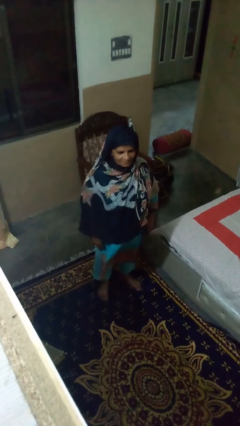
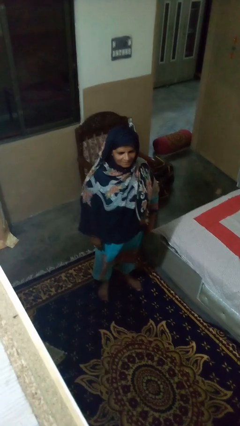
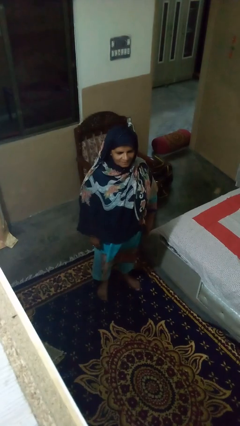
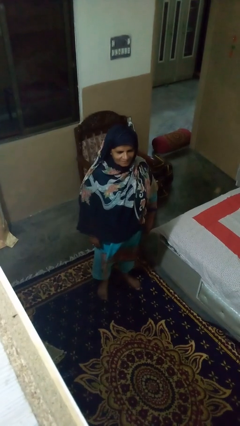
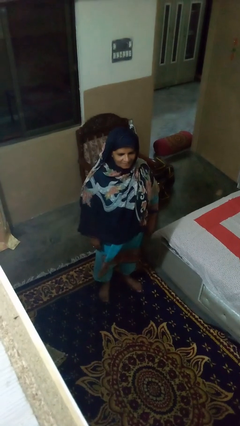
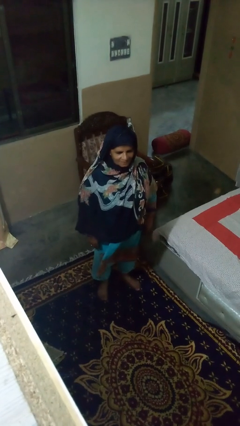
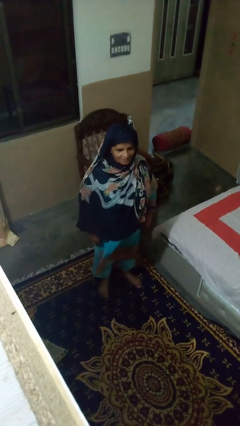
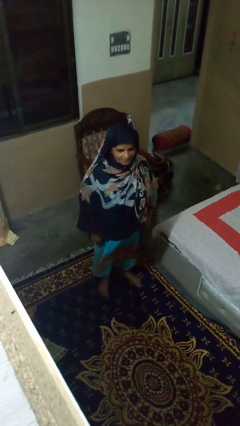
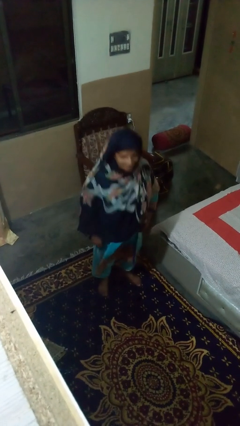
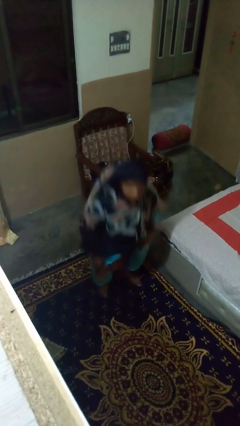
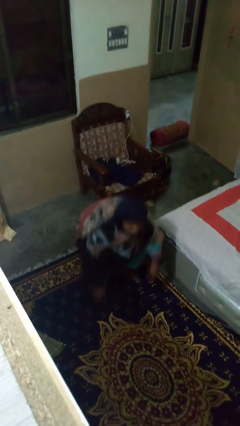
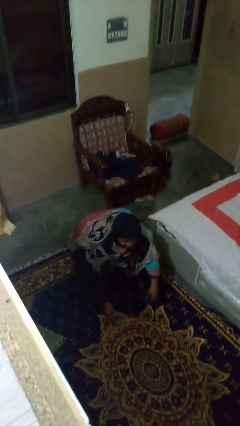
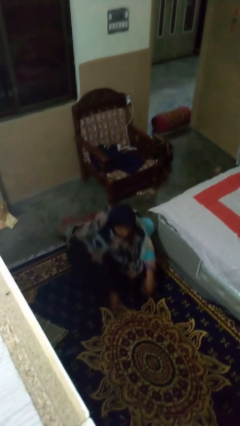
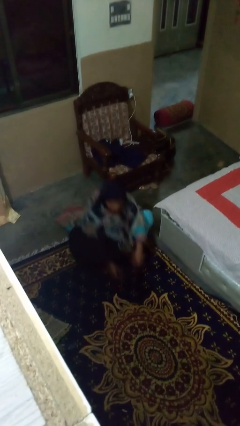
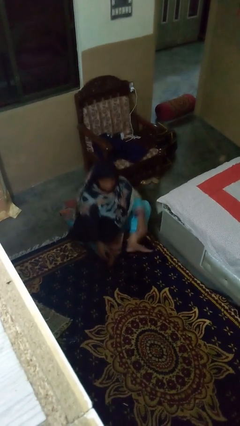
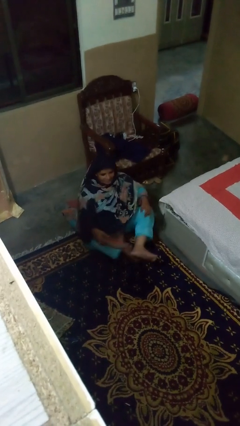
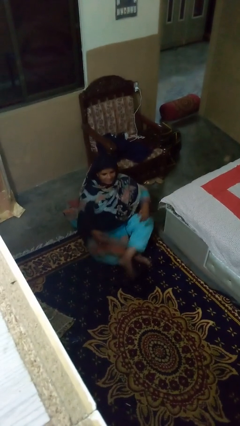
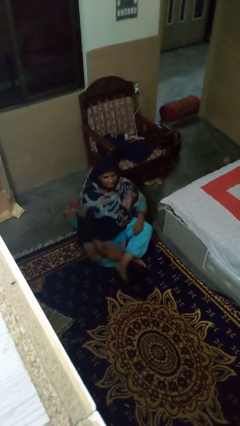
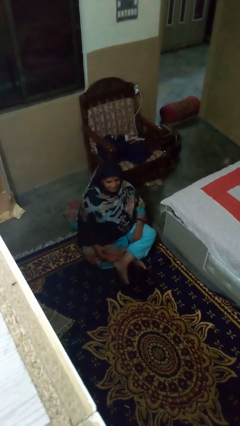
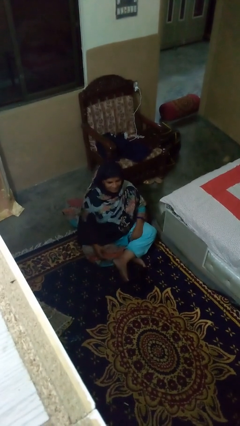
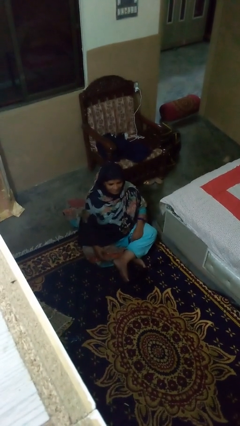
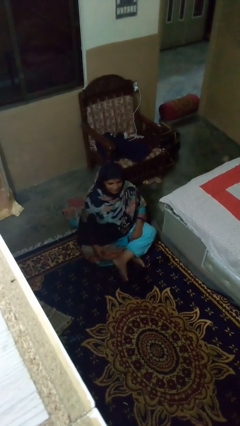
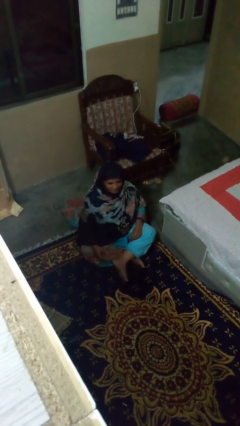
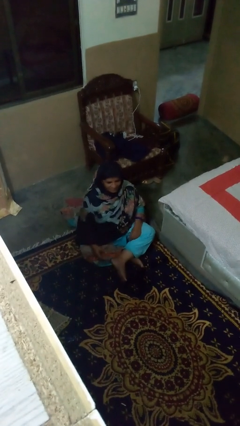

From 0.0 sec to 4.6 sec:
person sits crisscross

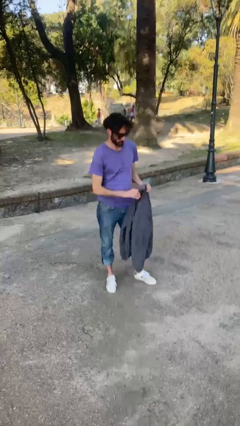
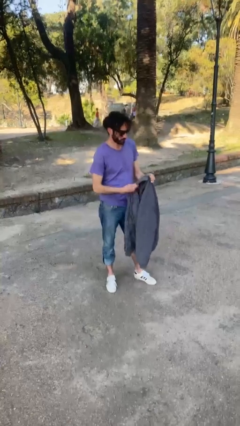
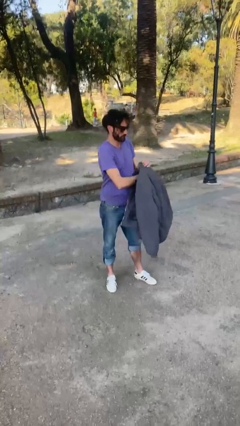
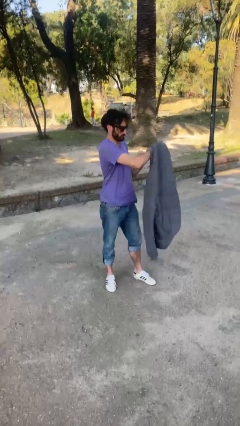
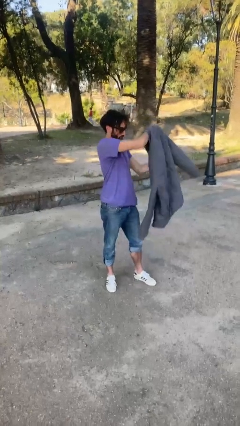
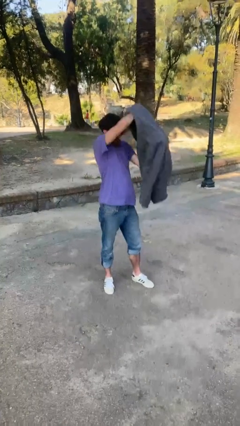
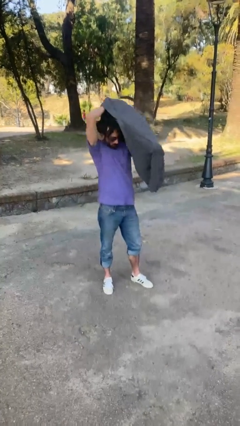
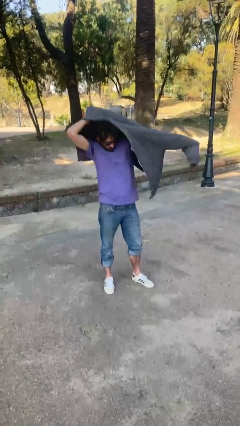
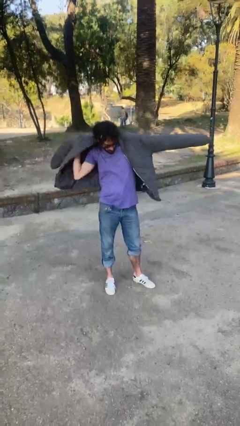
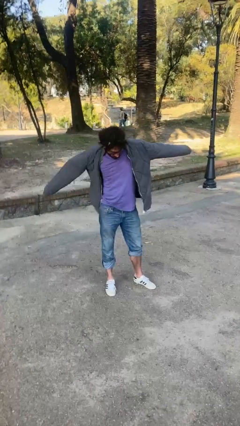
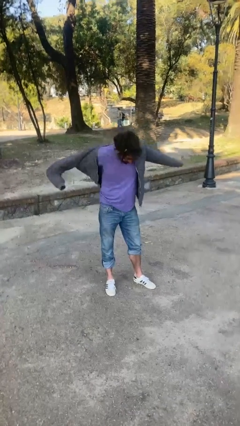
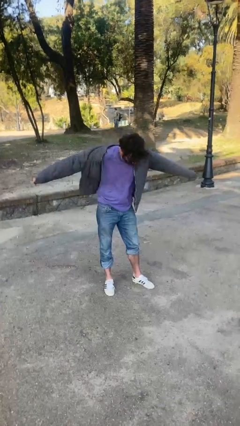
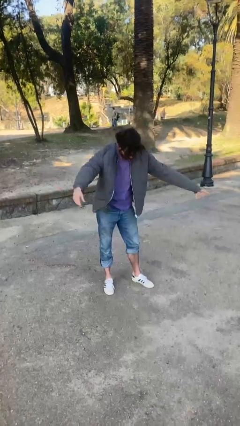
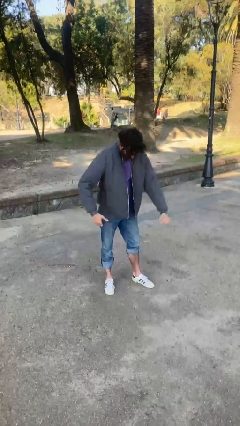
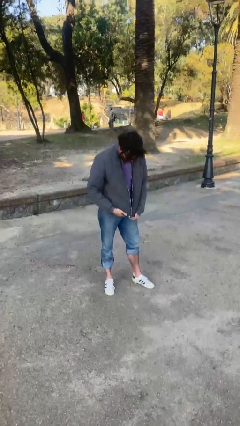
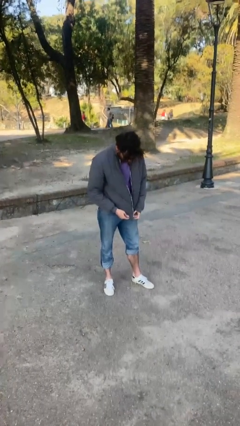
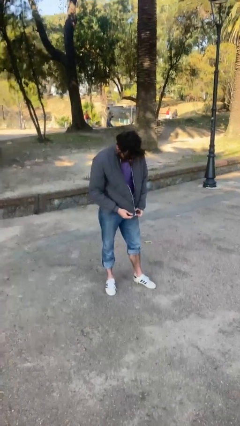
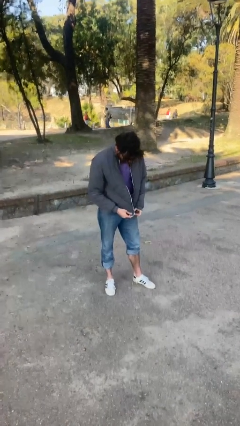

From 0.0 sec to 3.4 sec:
person puts on jacket

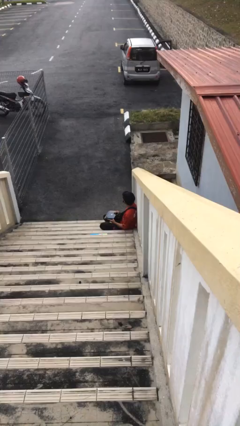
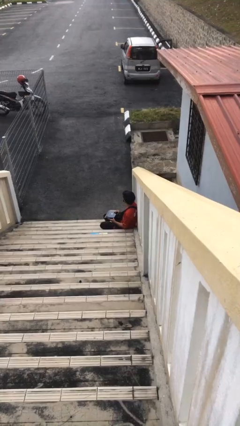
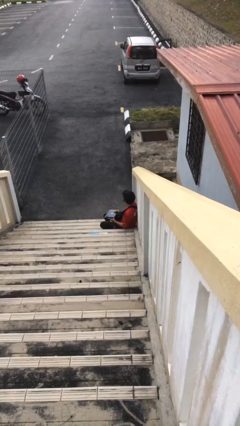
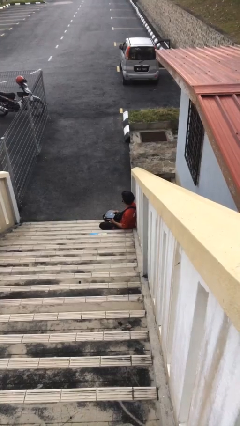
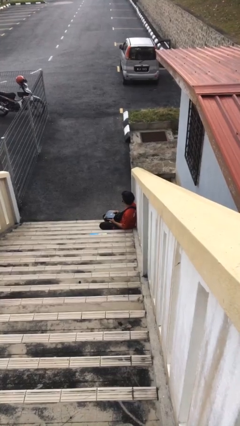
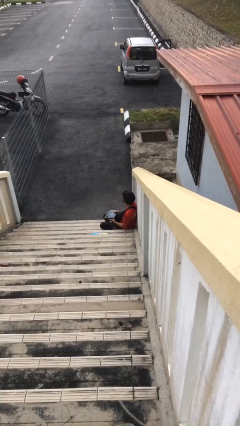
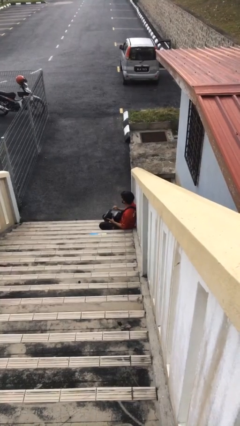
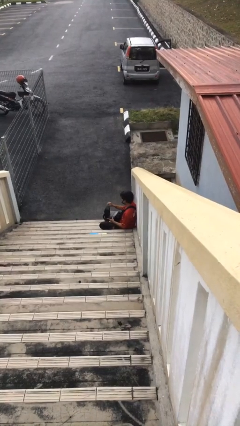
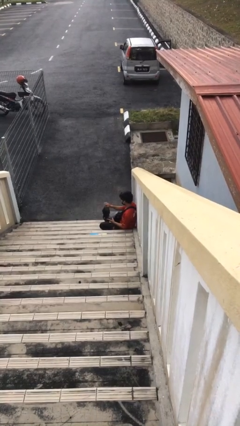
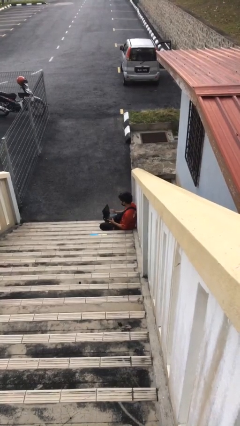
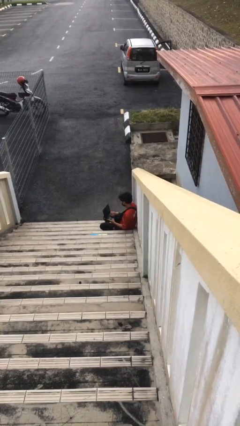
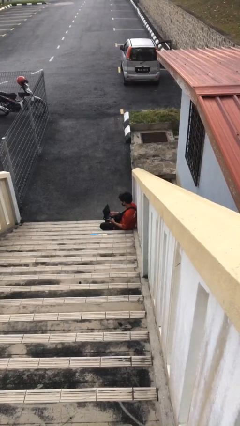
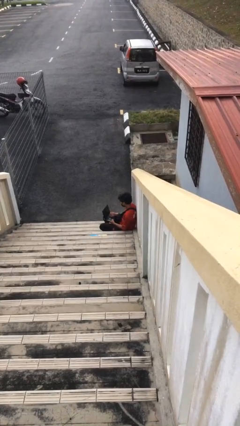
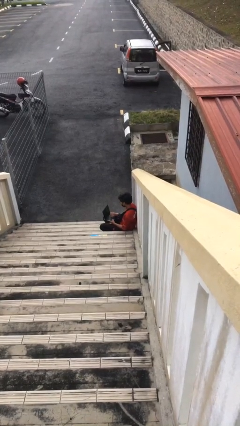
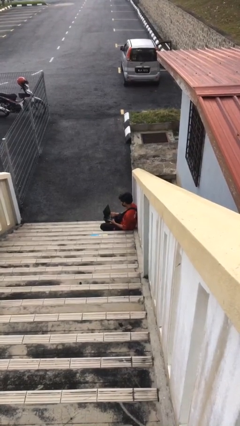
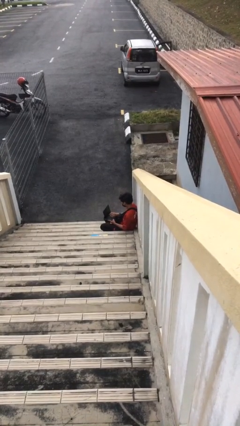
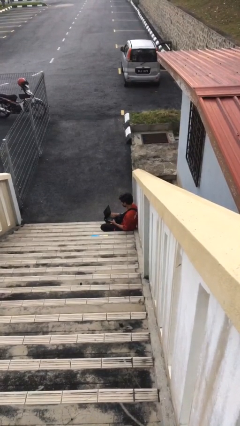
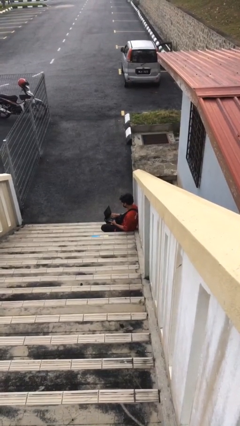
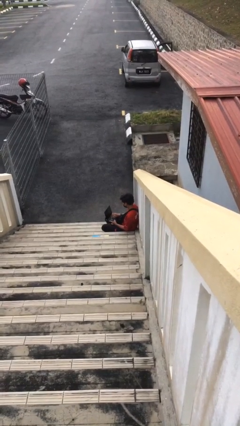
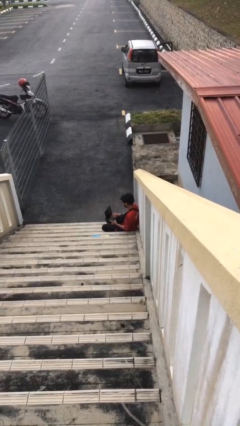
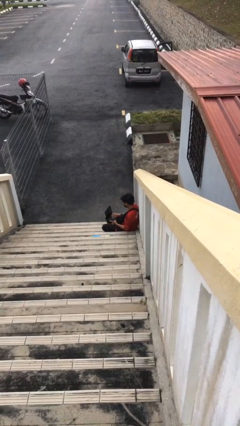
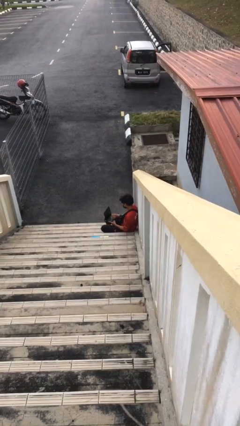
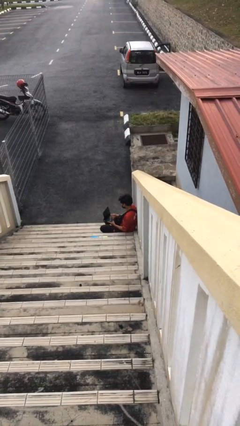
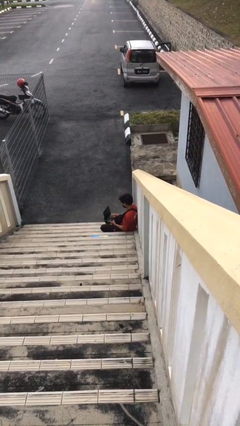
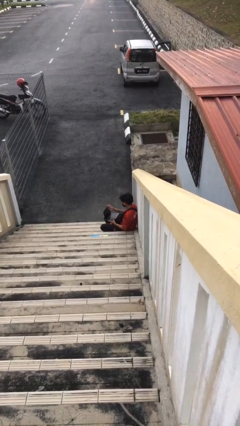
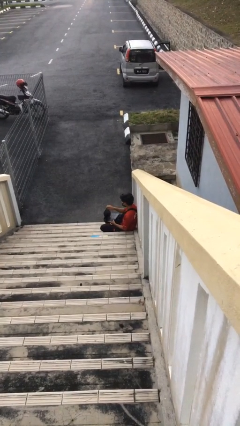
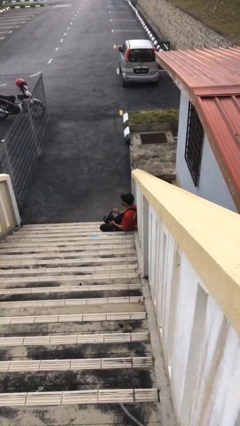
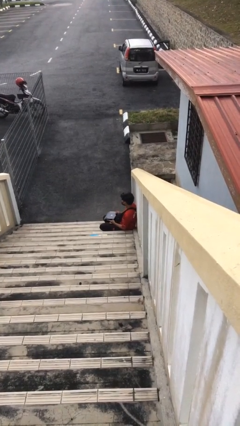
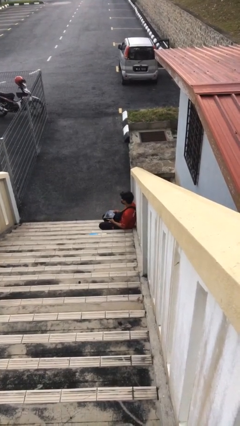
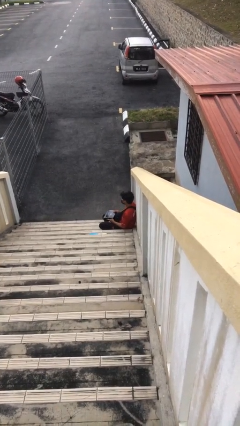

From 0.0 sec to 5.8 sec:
person interacts with laptop

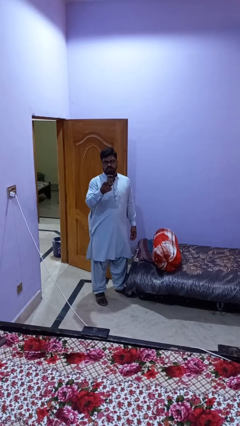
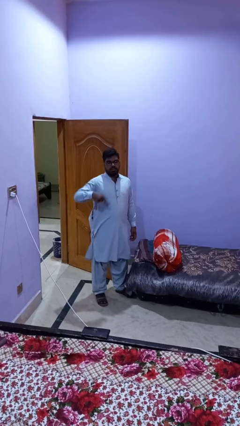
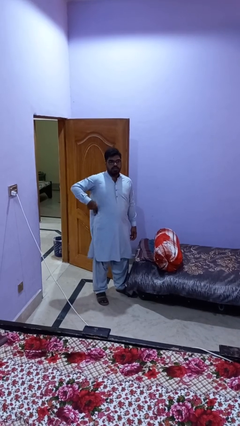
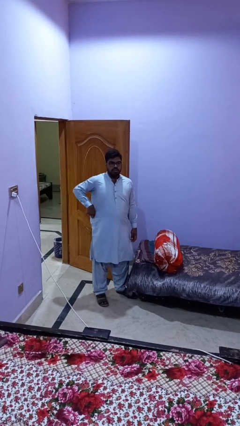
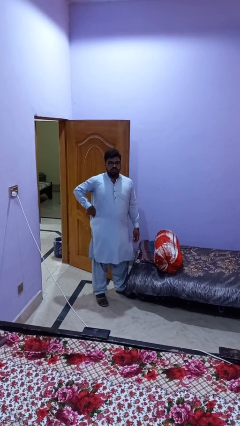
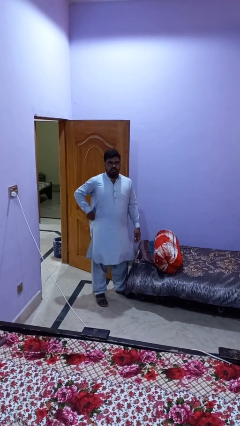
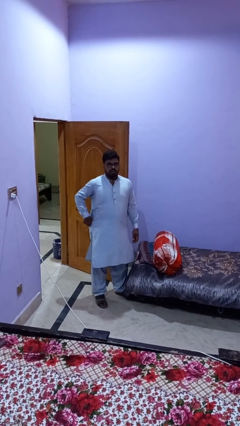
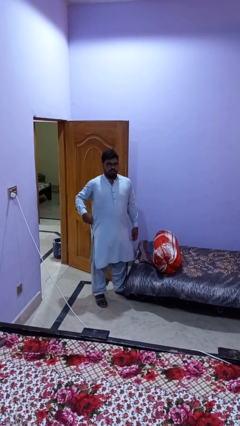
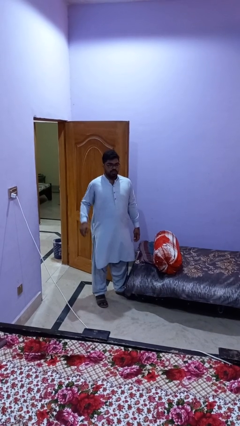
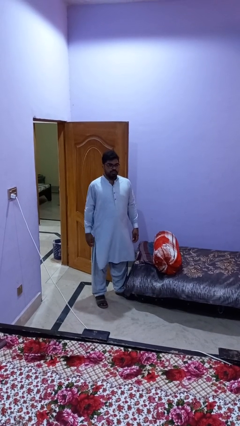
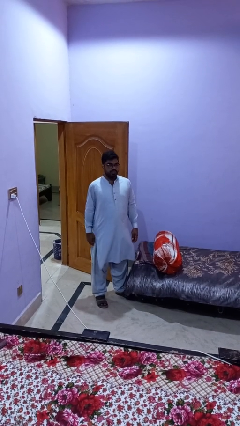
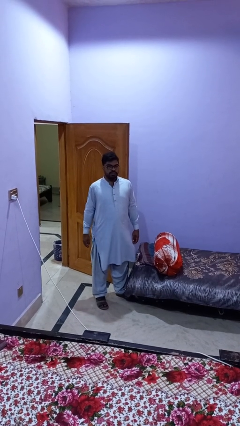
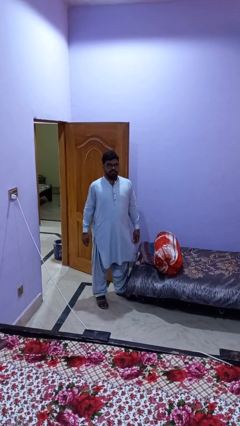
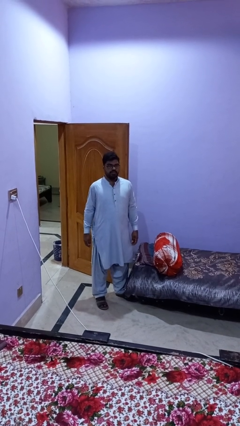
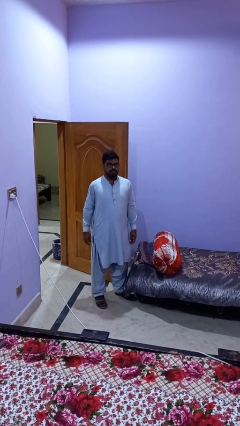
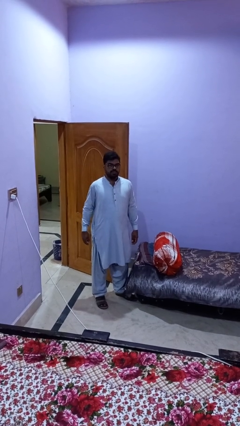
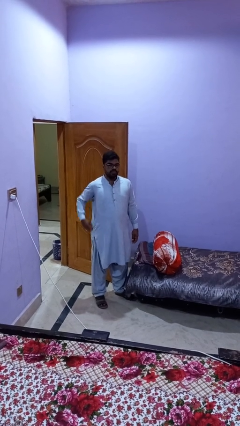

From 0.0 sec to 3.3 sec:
person puts phone into pocket

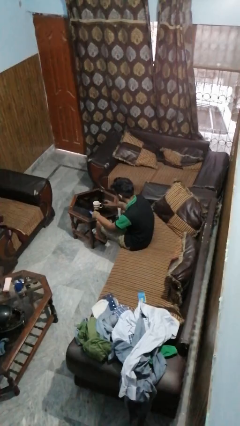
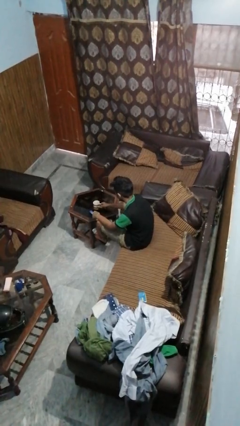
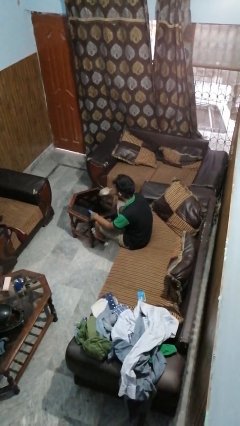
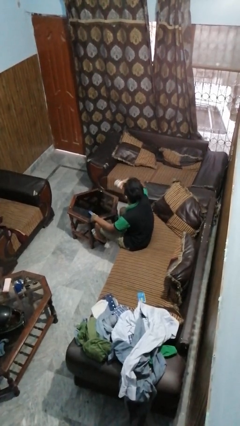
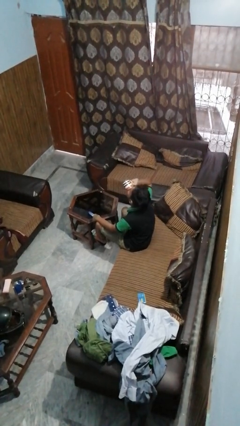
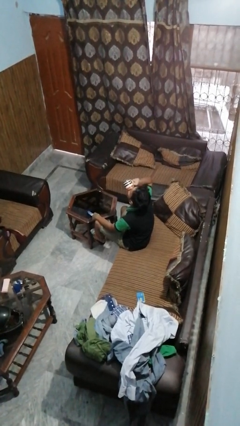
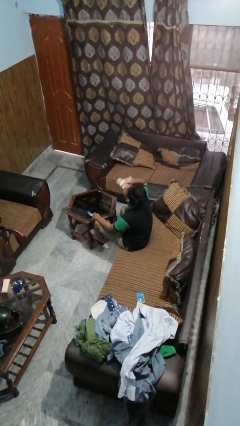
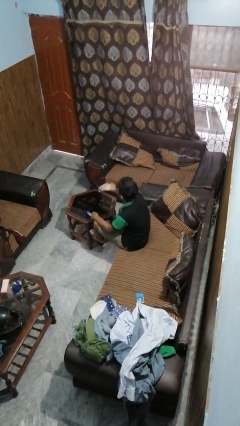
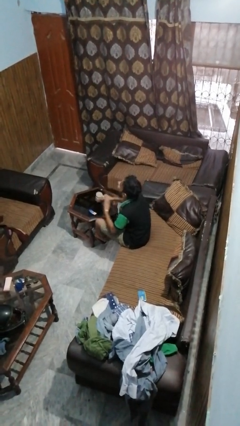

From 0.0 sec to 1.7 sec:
person drinks from cup
